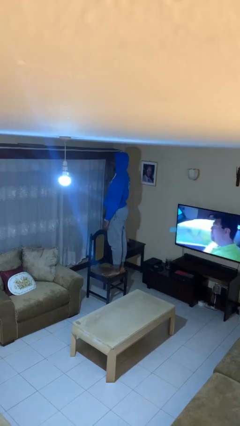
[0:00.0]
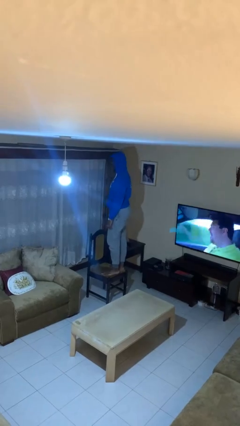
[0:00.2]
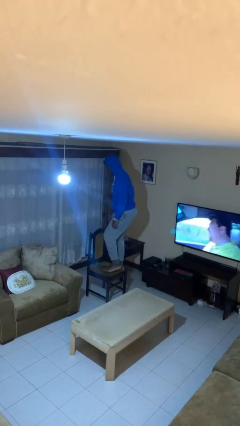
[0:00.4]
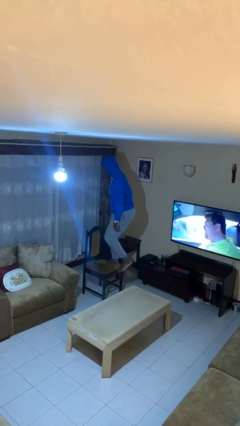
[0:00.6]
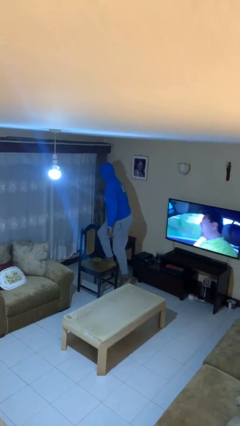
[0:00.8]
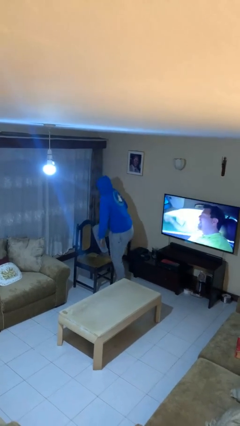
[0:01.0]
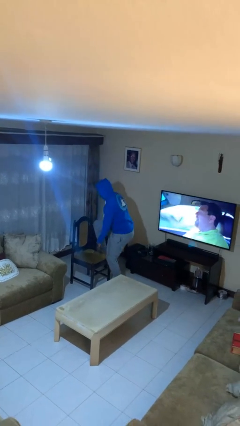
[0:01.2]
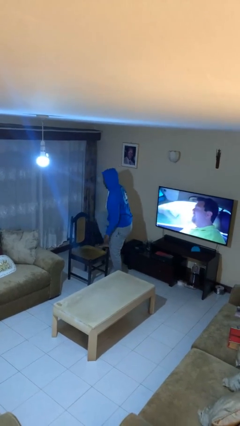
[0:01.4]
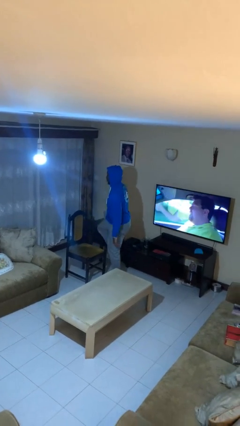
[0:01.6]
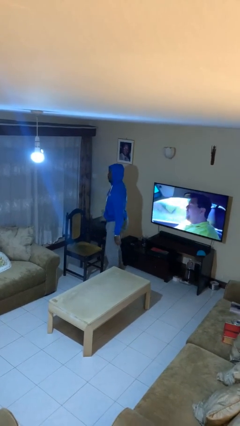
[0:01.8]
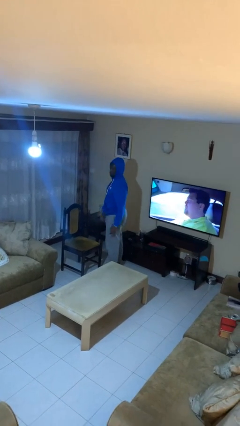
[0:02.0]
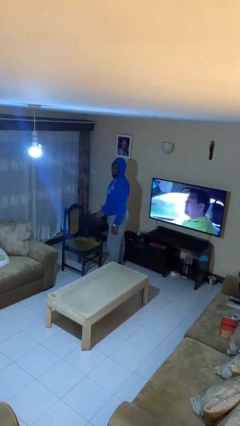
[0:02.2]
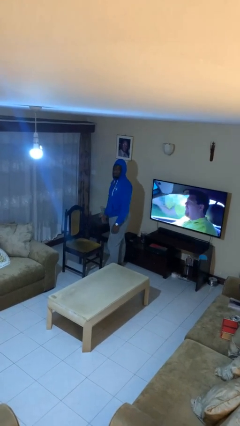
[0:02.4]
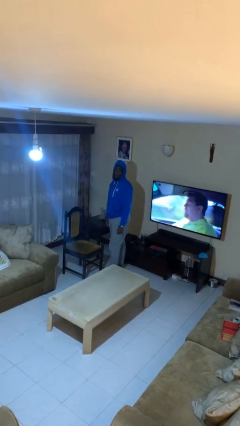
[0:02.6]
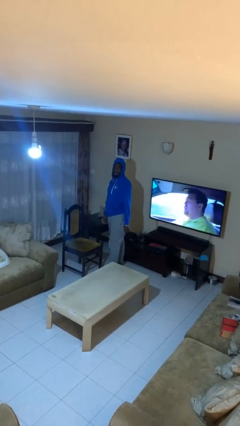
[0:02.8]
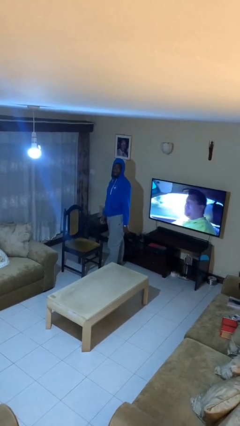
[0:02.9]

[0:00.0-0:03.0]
person climbs off chair

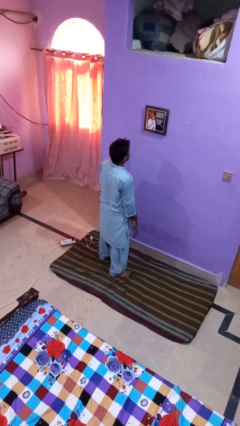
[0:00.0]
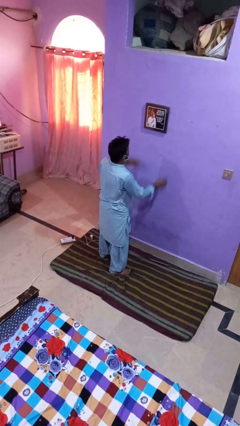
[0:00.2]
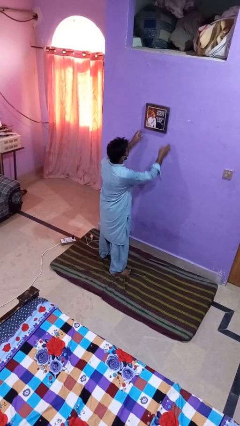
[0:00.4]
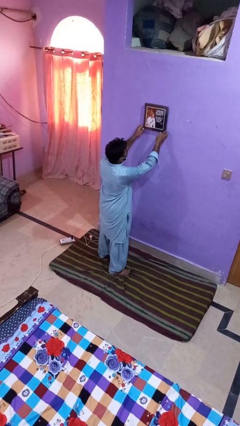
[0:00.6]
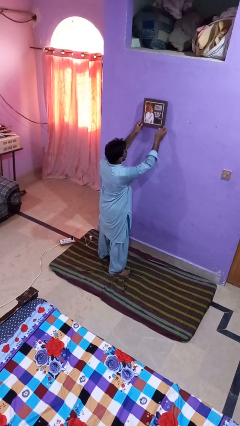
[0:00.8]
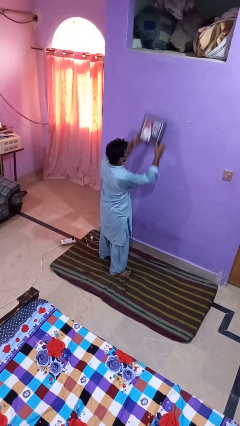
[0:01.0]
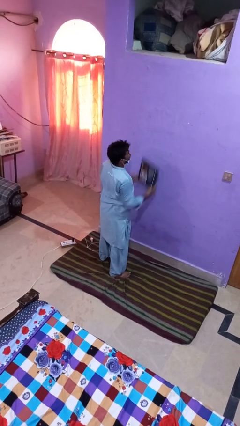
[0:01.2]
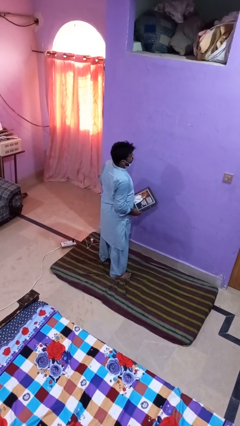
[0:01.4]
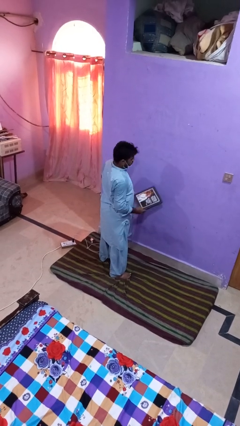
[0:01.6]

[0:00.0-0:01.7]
person takes down picture frame

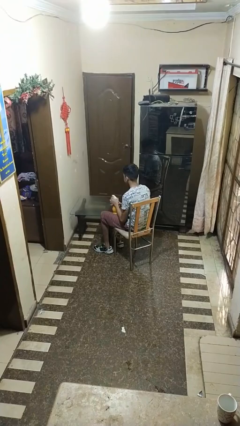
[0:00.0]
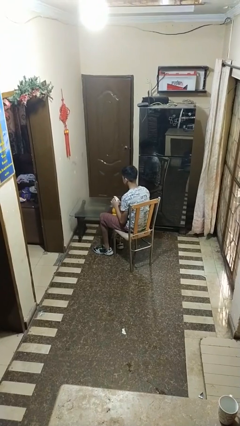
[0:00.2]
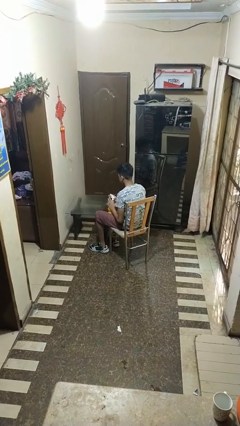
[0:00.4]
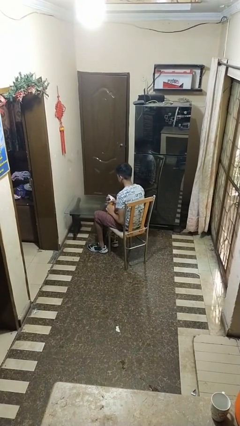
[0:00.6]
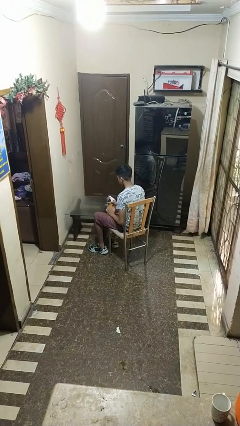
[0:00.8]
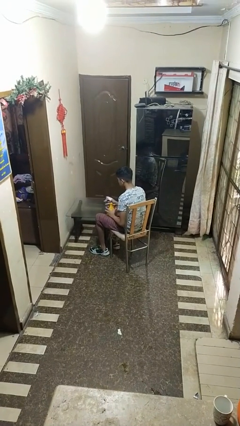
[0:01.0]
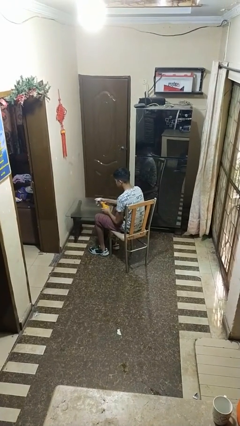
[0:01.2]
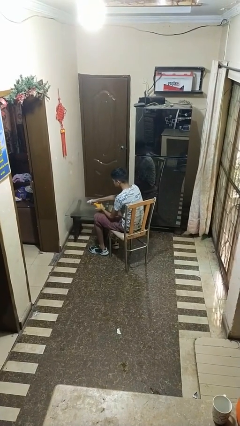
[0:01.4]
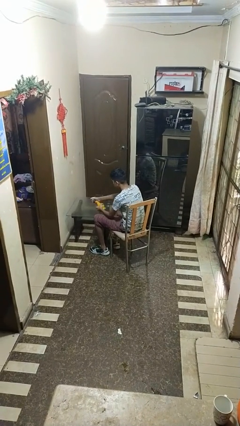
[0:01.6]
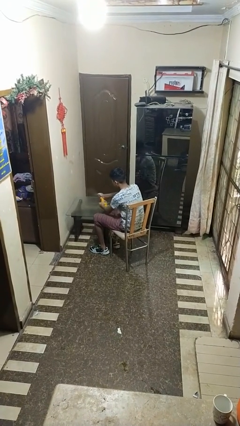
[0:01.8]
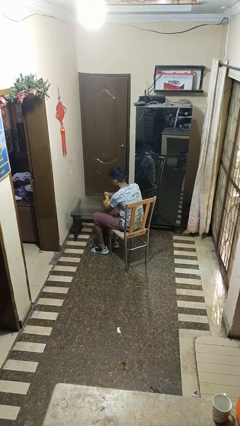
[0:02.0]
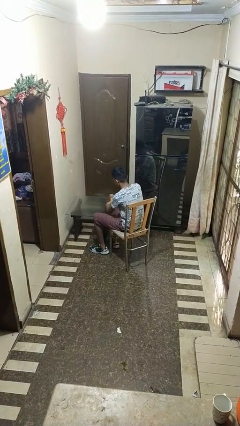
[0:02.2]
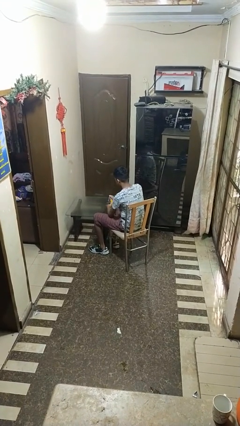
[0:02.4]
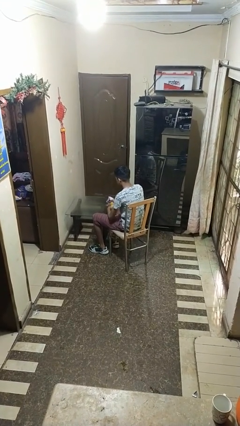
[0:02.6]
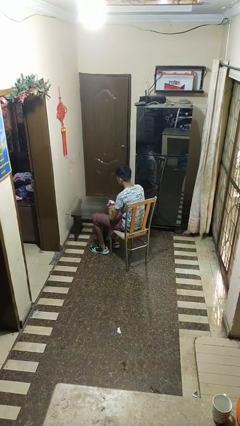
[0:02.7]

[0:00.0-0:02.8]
person sprays from bottle

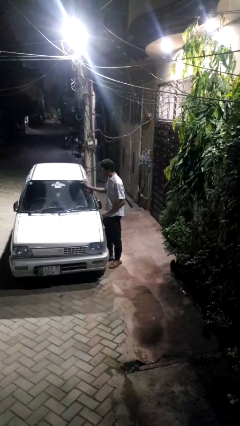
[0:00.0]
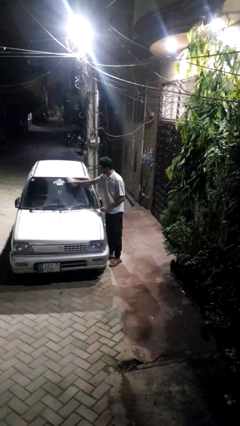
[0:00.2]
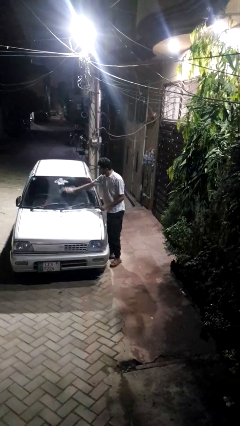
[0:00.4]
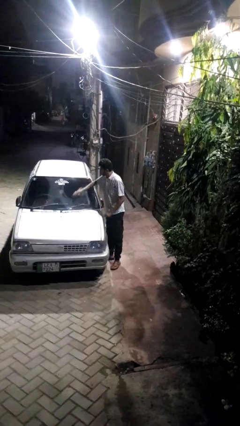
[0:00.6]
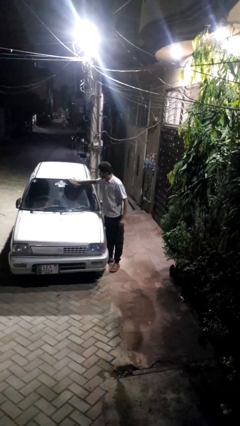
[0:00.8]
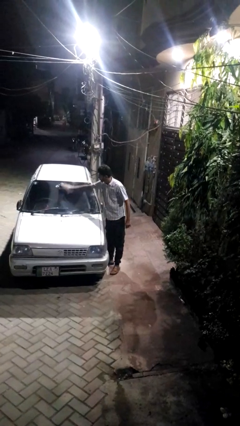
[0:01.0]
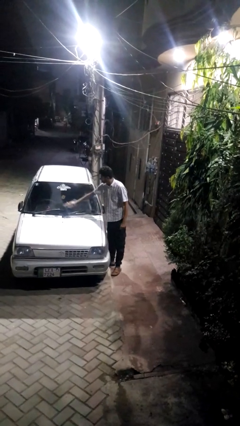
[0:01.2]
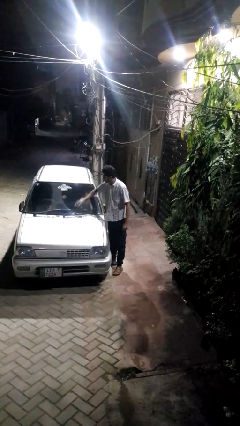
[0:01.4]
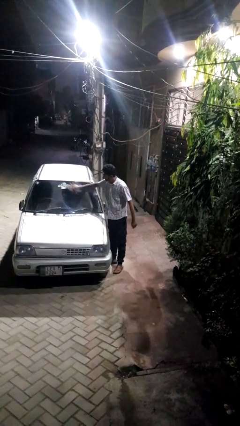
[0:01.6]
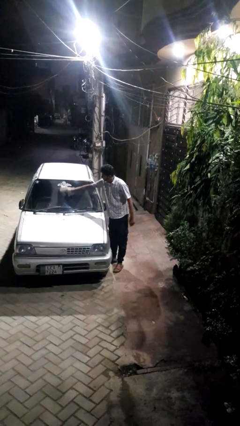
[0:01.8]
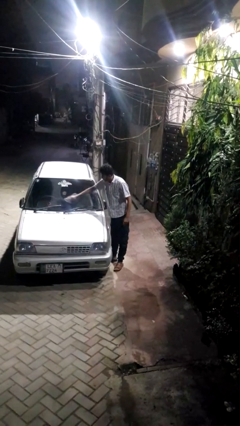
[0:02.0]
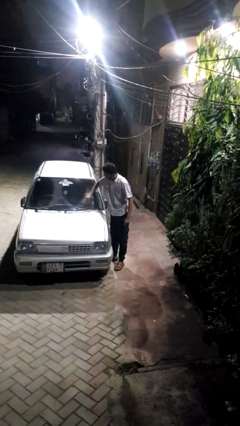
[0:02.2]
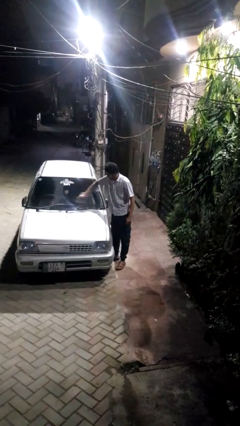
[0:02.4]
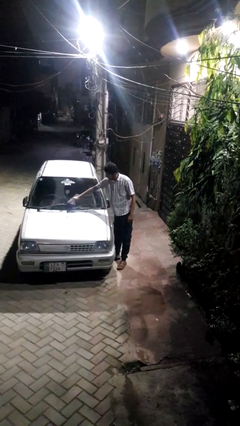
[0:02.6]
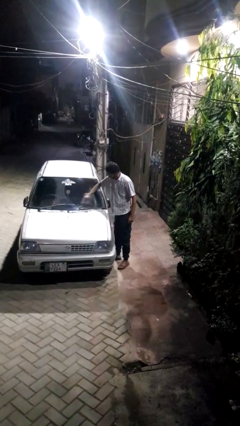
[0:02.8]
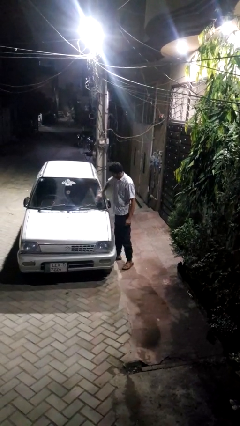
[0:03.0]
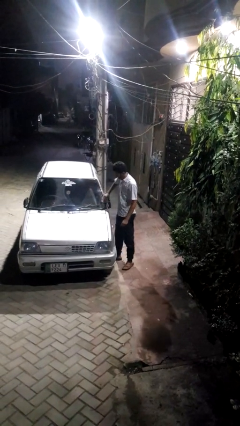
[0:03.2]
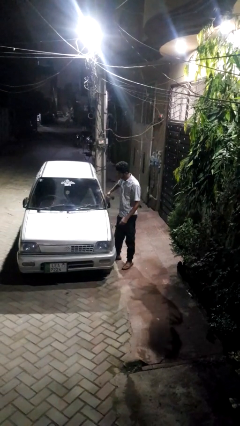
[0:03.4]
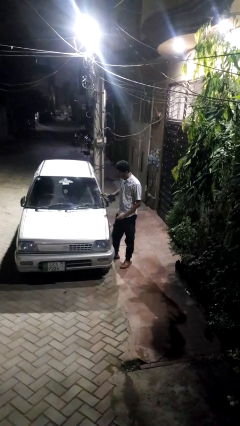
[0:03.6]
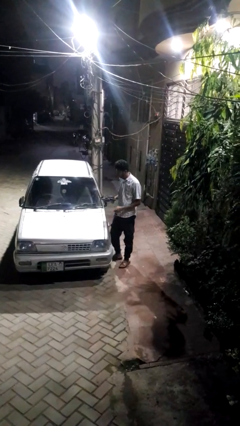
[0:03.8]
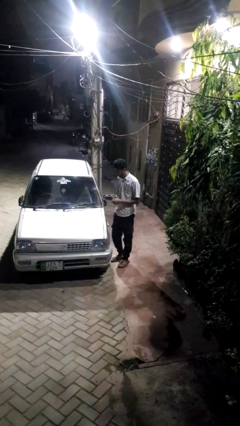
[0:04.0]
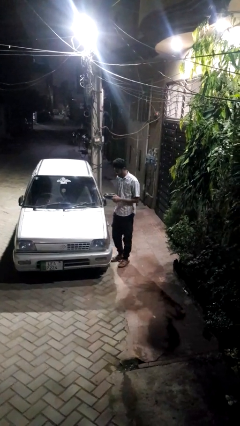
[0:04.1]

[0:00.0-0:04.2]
person polishes car with rag

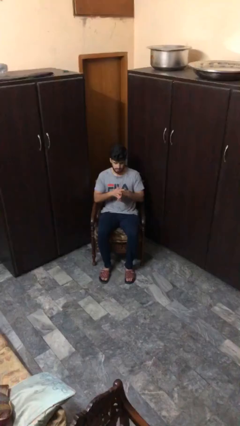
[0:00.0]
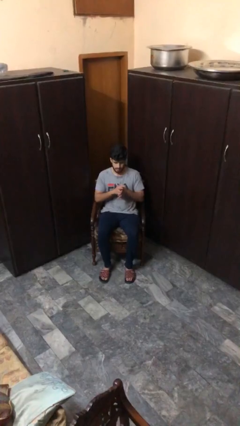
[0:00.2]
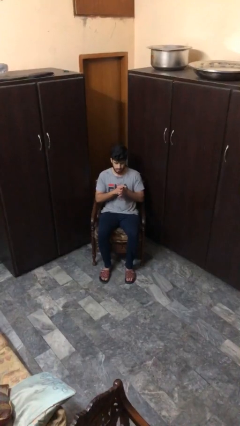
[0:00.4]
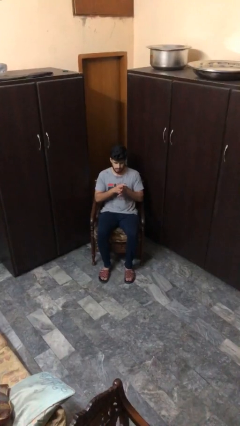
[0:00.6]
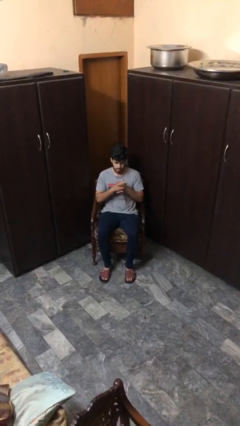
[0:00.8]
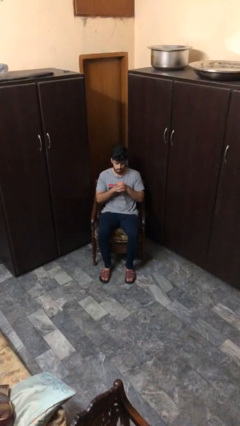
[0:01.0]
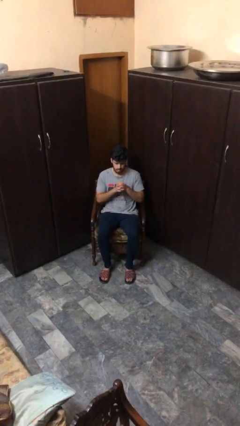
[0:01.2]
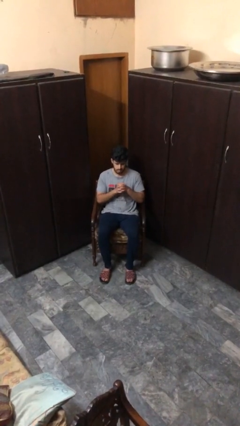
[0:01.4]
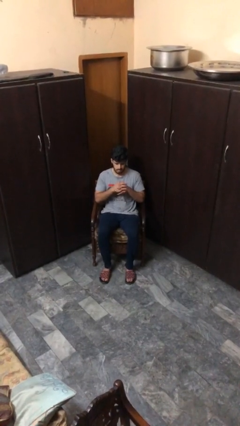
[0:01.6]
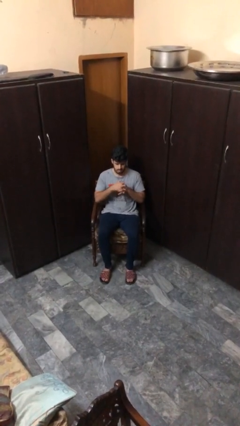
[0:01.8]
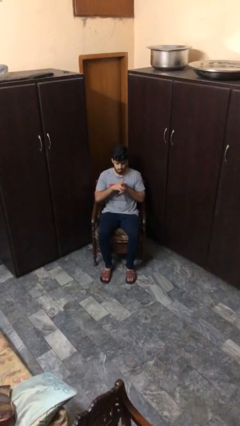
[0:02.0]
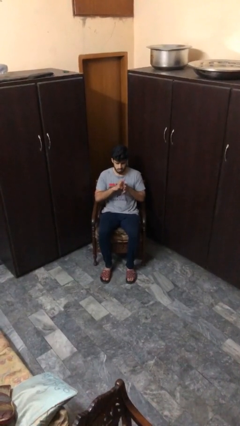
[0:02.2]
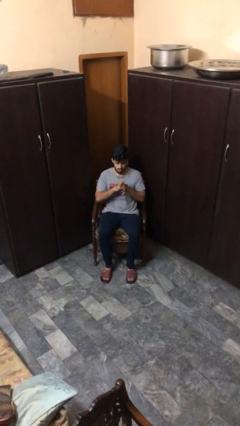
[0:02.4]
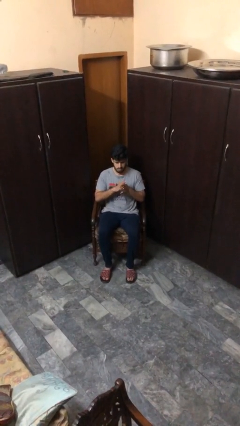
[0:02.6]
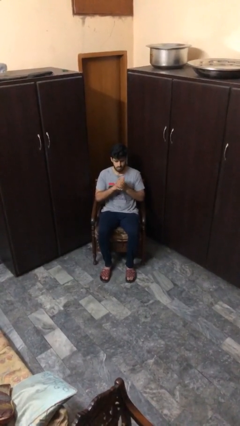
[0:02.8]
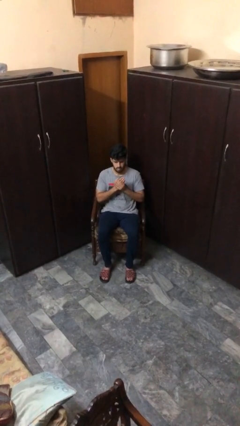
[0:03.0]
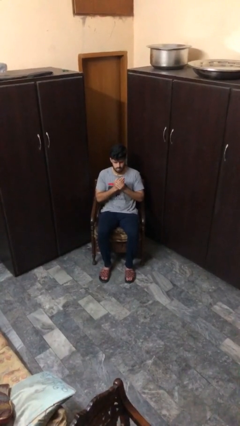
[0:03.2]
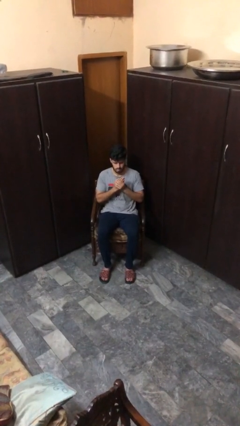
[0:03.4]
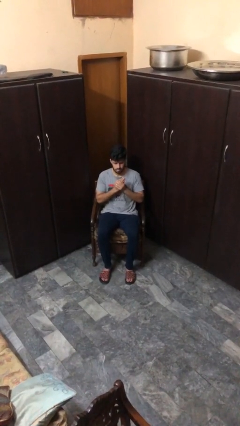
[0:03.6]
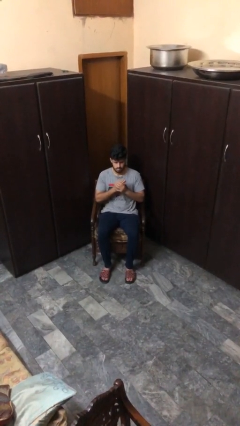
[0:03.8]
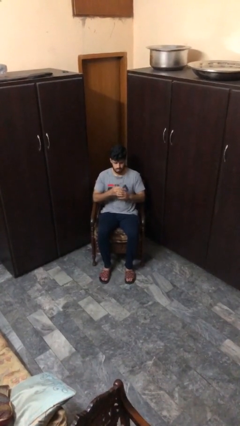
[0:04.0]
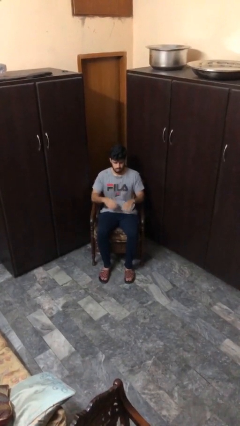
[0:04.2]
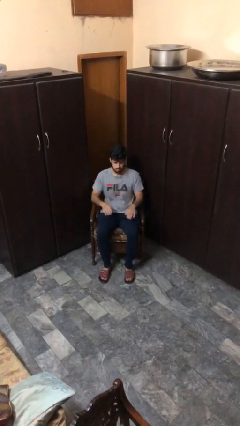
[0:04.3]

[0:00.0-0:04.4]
person cracks knuckles

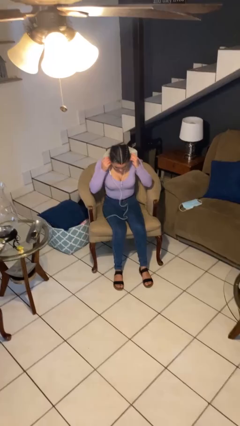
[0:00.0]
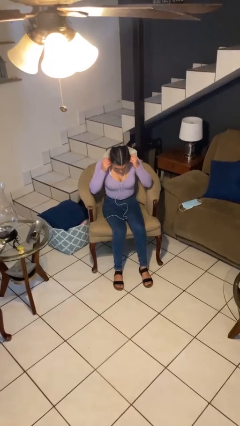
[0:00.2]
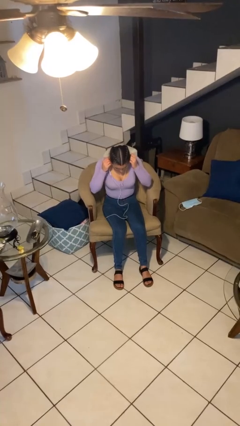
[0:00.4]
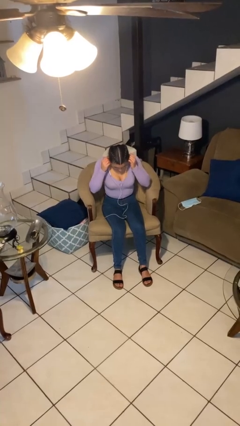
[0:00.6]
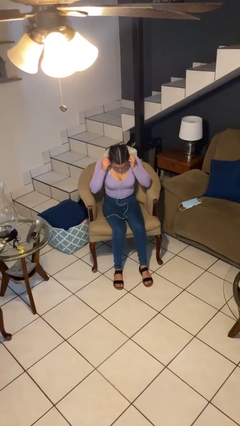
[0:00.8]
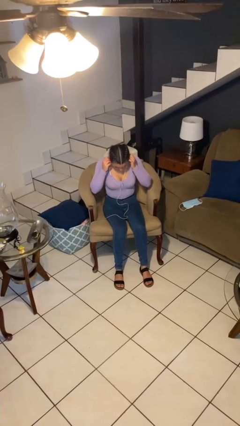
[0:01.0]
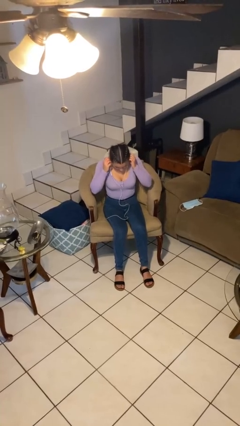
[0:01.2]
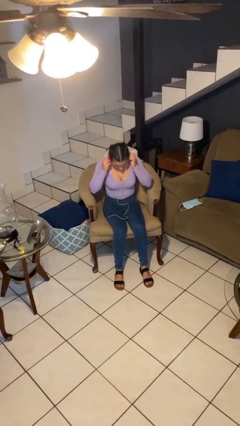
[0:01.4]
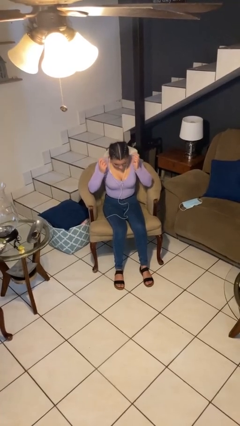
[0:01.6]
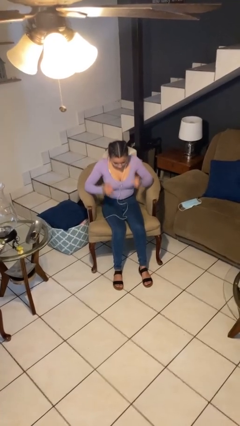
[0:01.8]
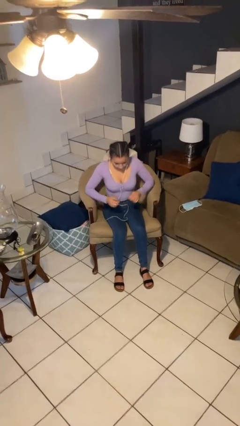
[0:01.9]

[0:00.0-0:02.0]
person puts on headphones
